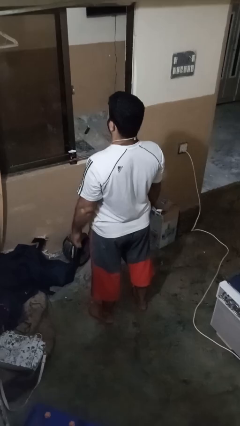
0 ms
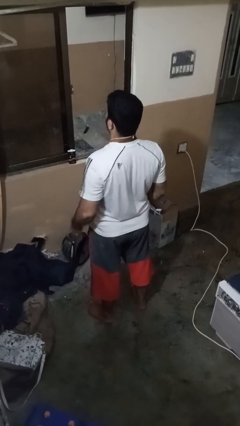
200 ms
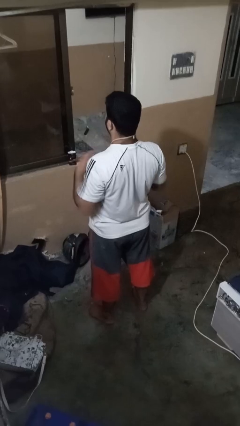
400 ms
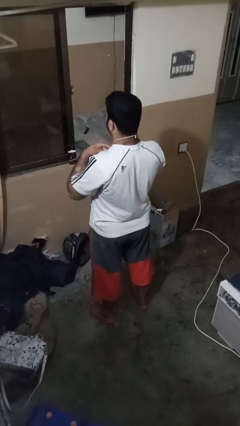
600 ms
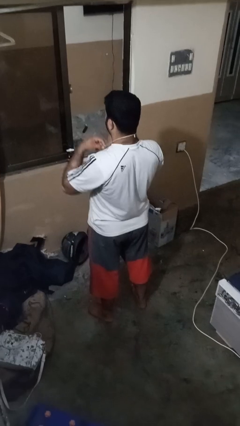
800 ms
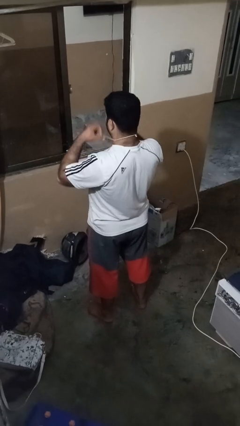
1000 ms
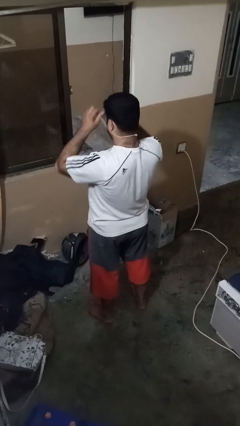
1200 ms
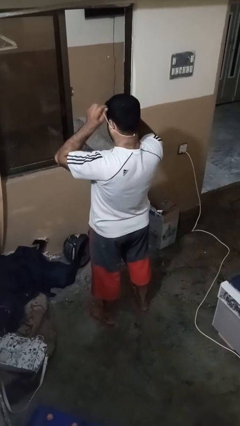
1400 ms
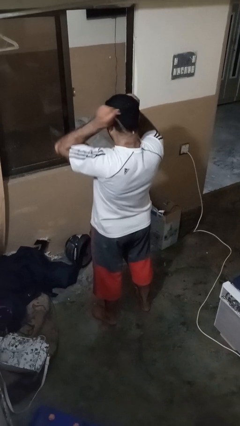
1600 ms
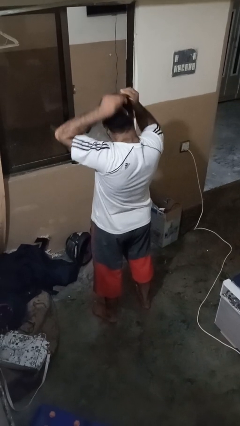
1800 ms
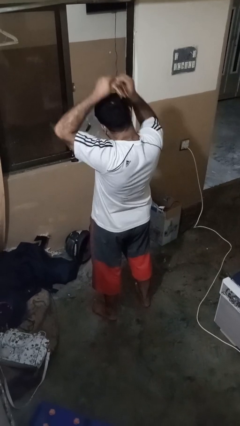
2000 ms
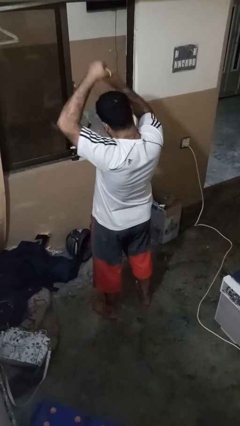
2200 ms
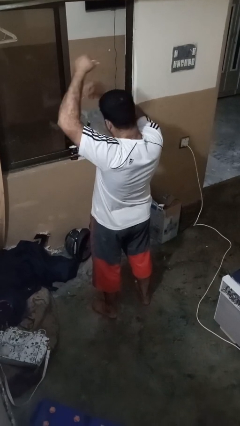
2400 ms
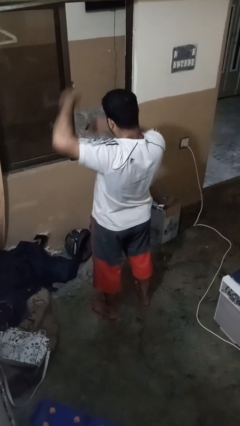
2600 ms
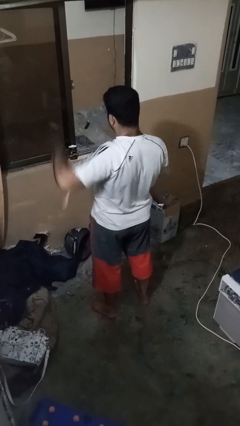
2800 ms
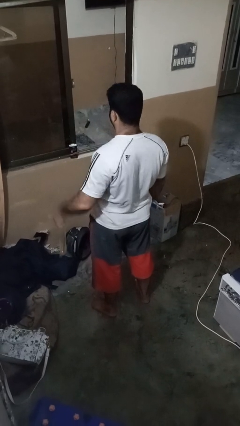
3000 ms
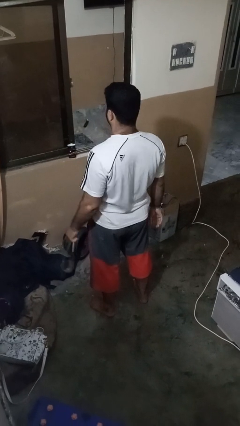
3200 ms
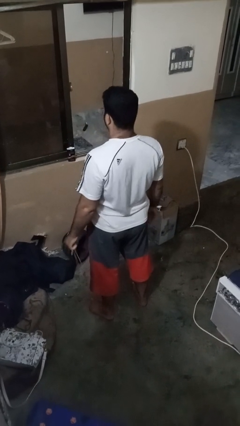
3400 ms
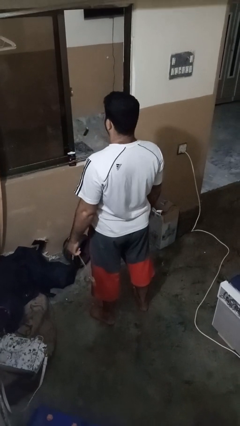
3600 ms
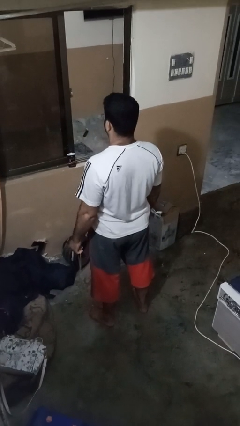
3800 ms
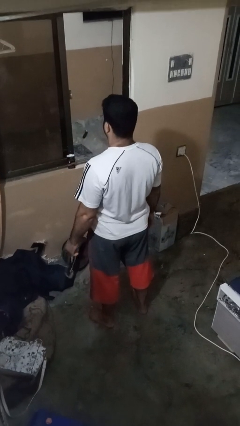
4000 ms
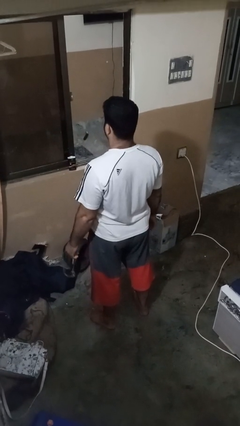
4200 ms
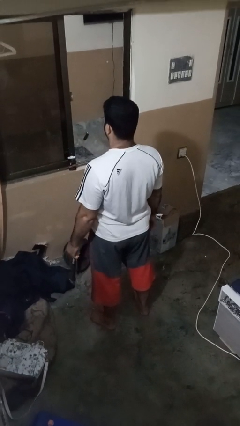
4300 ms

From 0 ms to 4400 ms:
person takes off necklace

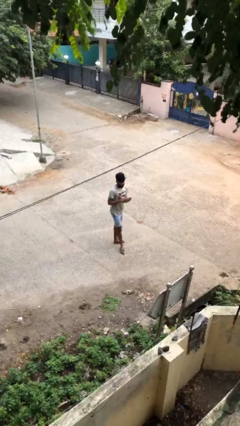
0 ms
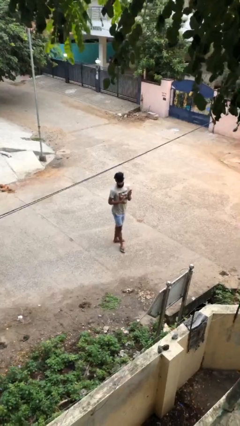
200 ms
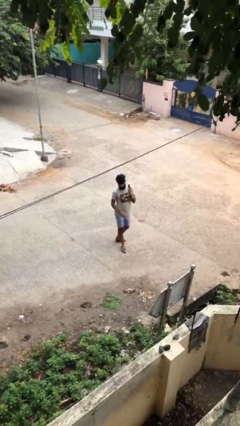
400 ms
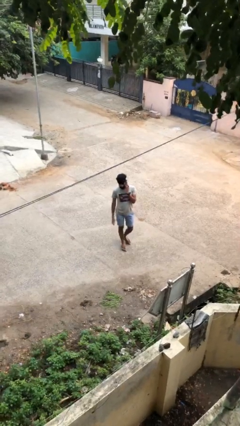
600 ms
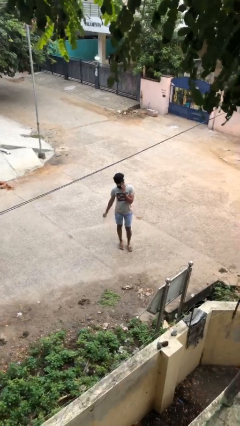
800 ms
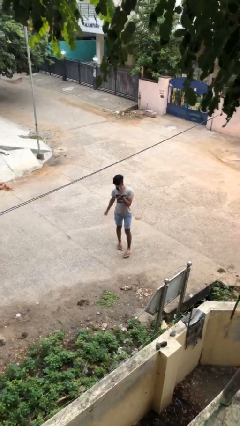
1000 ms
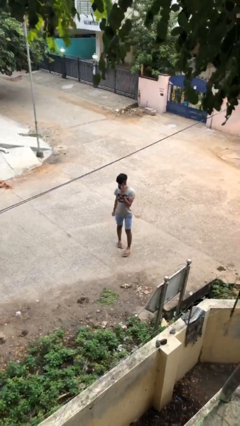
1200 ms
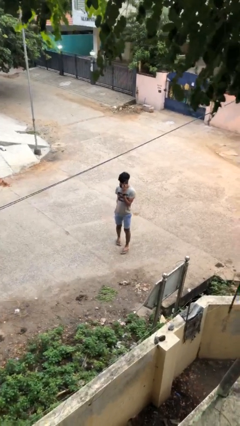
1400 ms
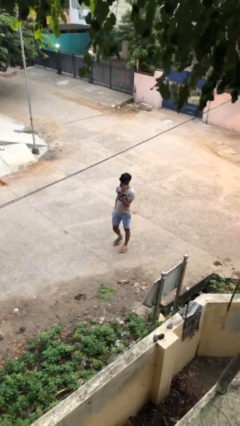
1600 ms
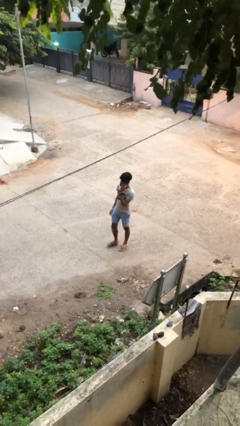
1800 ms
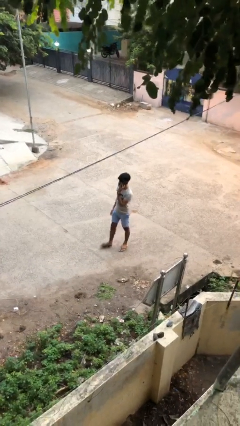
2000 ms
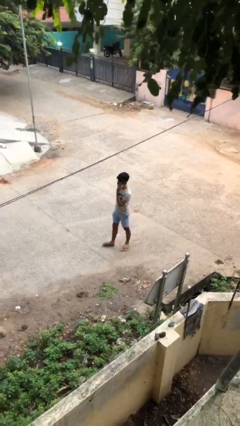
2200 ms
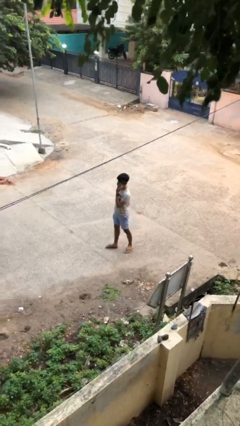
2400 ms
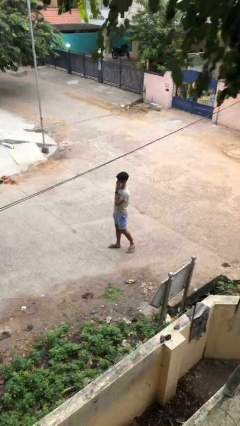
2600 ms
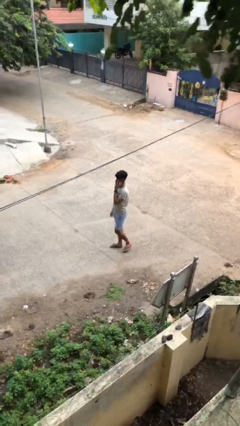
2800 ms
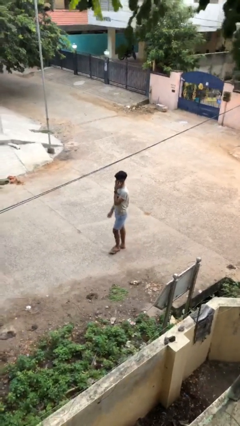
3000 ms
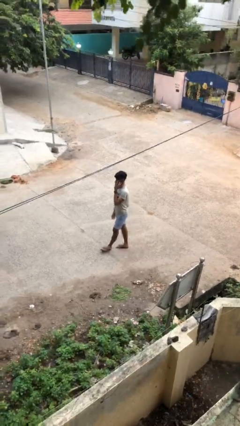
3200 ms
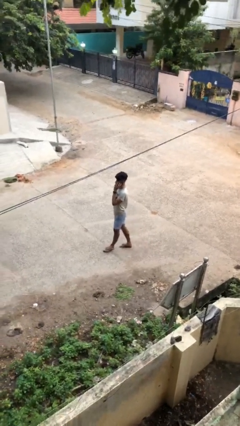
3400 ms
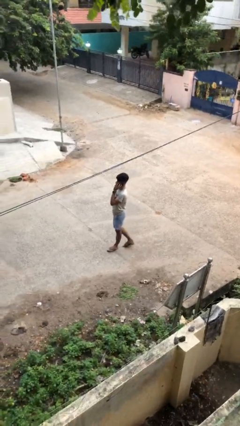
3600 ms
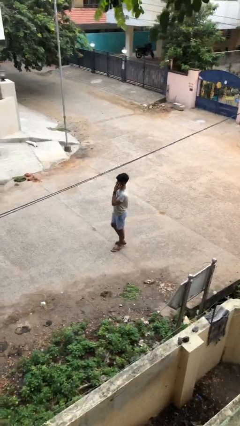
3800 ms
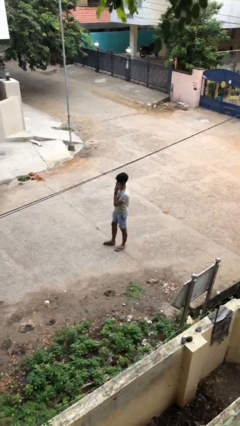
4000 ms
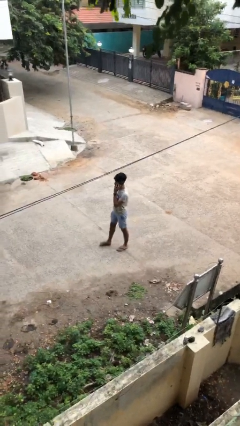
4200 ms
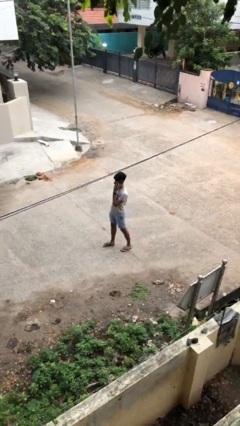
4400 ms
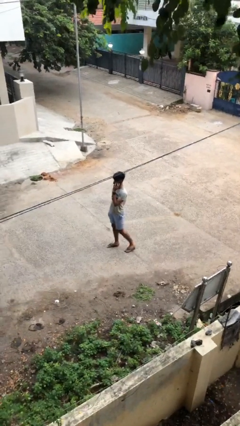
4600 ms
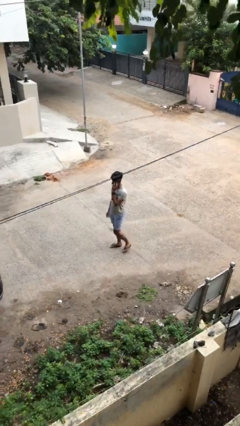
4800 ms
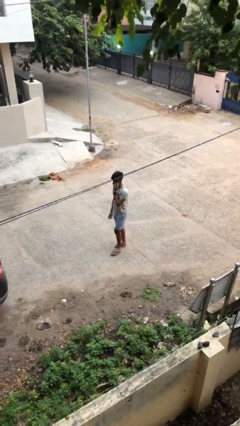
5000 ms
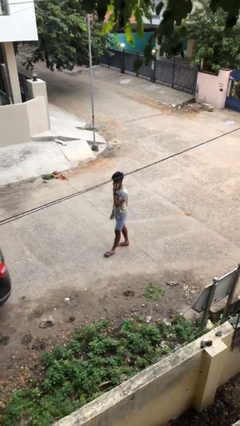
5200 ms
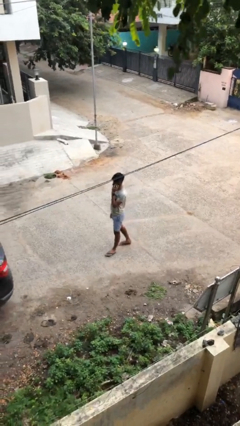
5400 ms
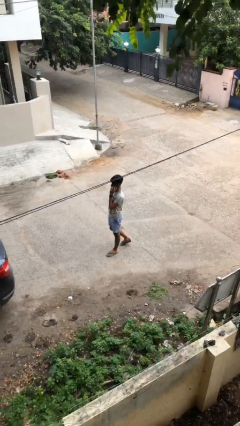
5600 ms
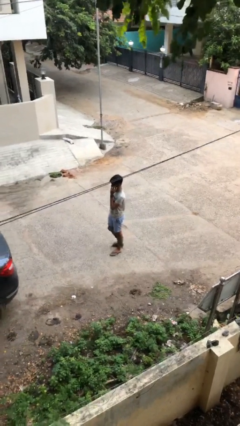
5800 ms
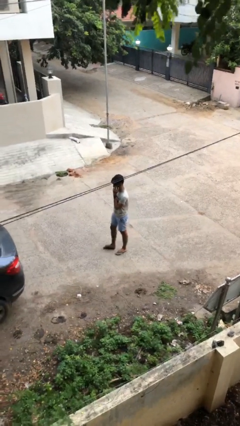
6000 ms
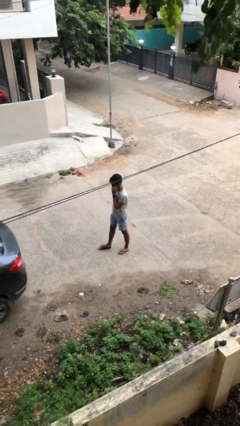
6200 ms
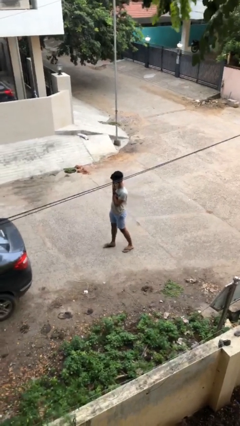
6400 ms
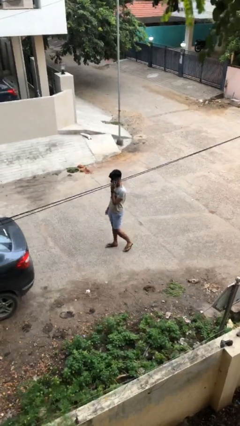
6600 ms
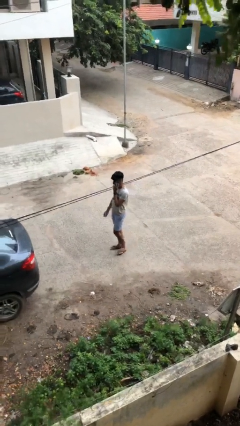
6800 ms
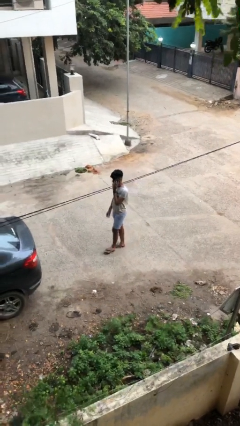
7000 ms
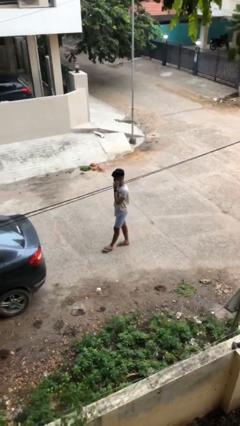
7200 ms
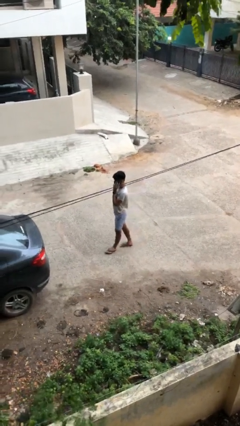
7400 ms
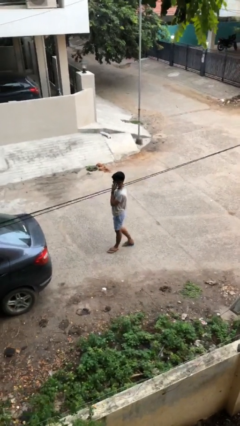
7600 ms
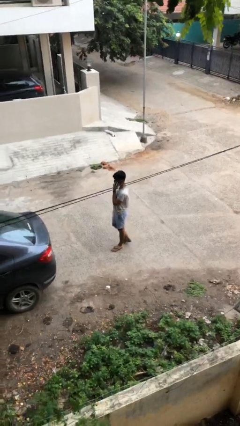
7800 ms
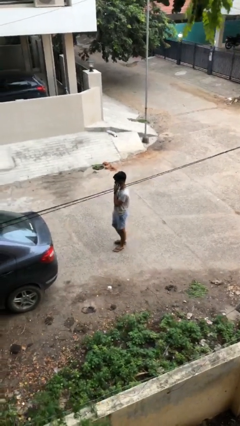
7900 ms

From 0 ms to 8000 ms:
person talks on phone

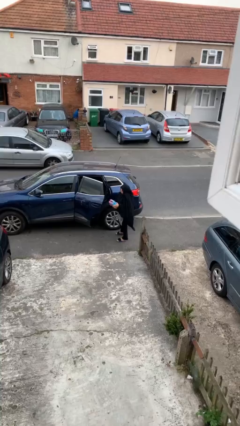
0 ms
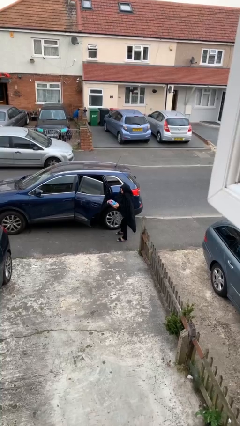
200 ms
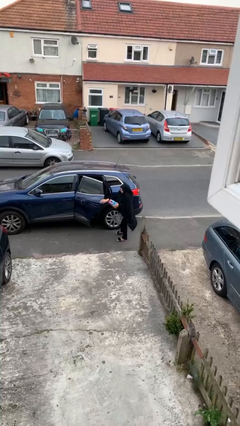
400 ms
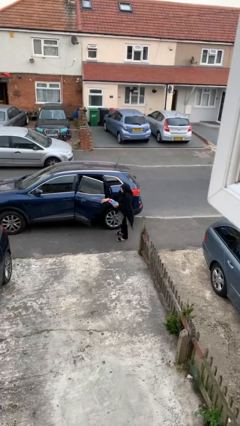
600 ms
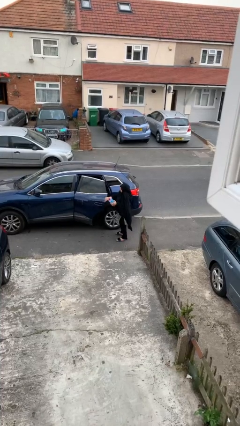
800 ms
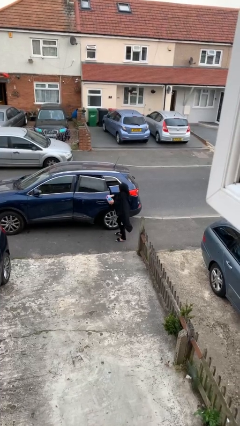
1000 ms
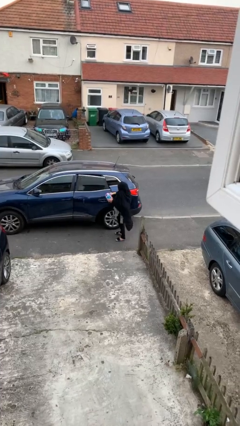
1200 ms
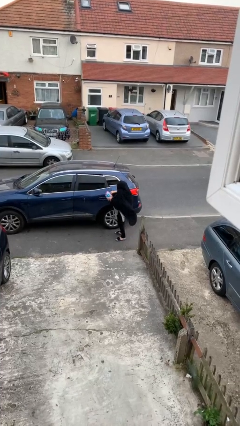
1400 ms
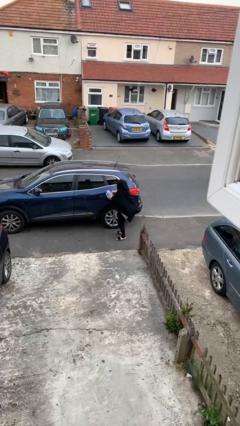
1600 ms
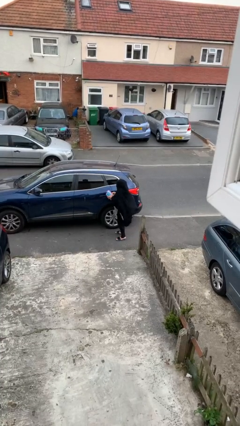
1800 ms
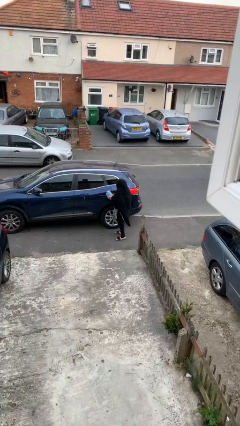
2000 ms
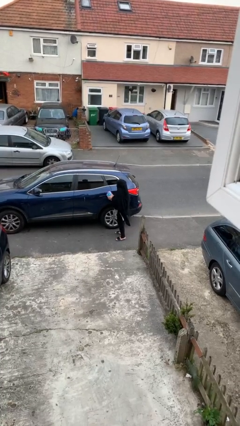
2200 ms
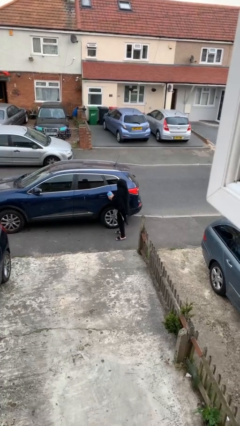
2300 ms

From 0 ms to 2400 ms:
person closes car door

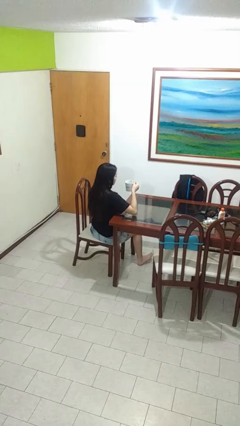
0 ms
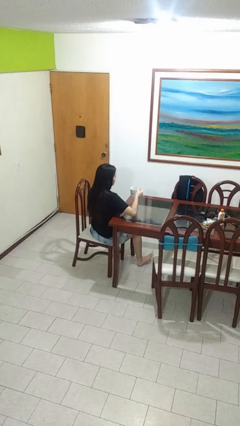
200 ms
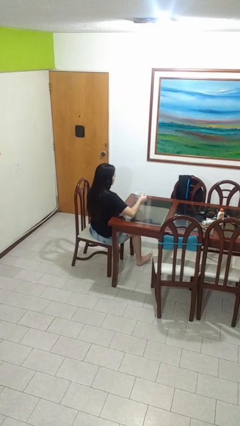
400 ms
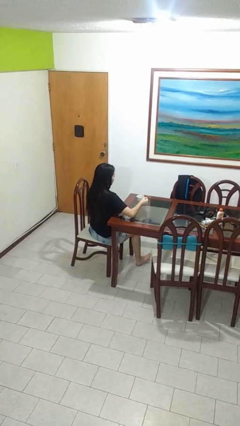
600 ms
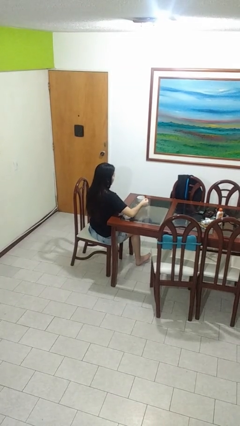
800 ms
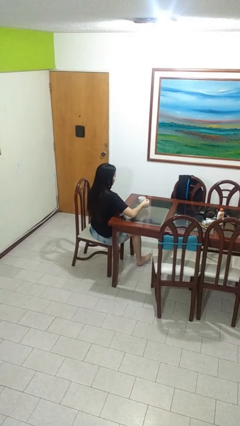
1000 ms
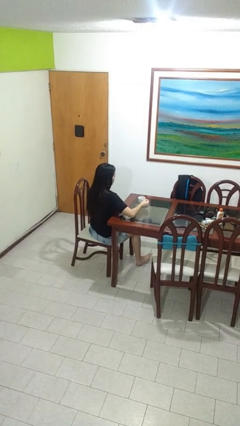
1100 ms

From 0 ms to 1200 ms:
person puts down object on table

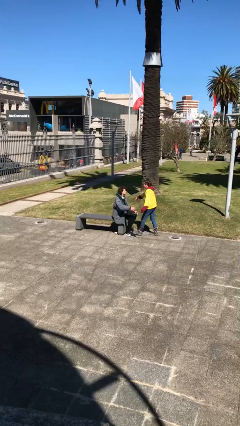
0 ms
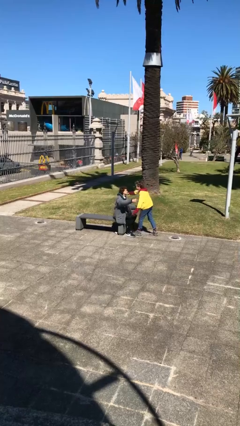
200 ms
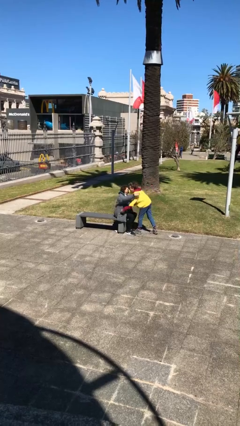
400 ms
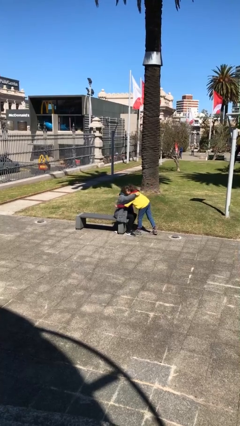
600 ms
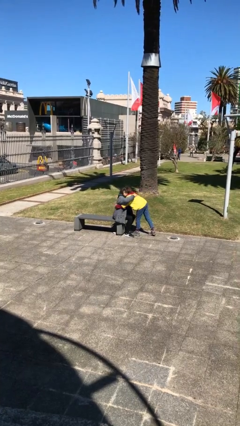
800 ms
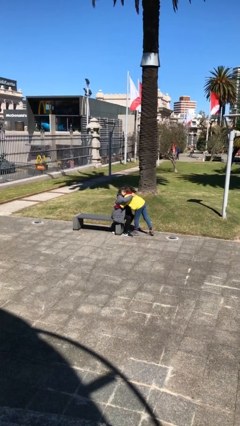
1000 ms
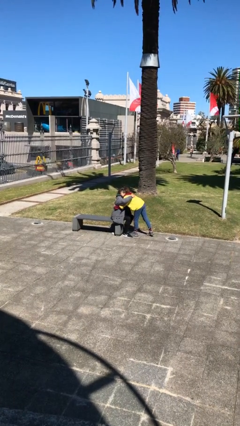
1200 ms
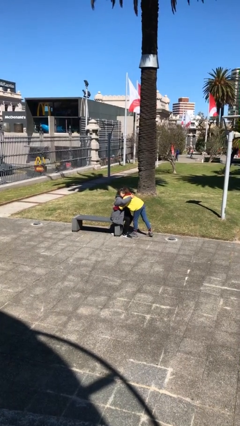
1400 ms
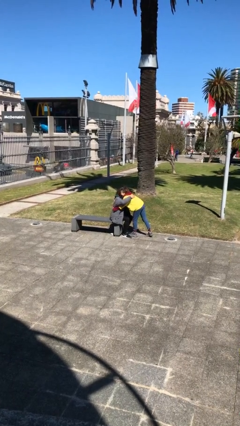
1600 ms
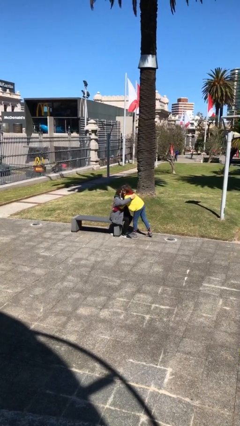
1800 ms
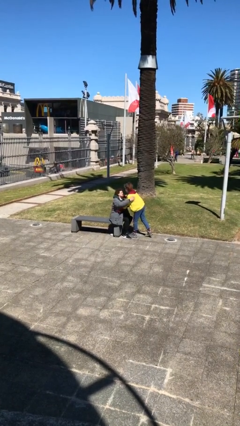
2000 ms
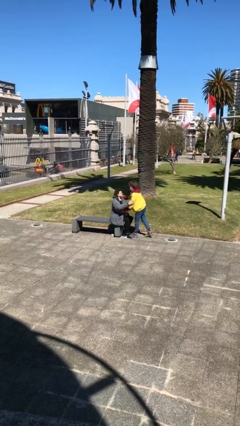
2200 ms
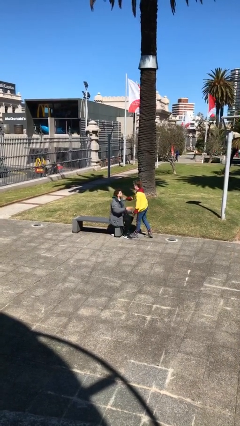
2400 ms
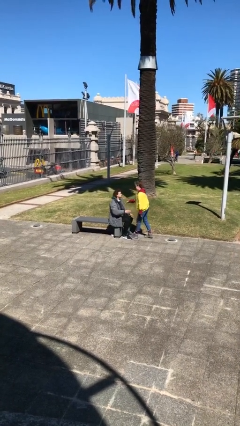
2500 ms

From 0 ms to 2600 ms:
person embraces person
